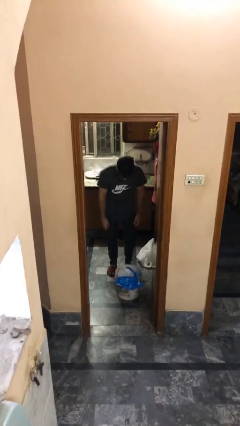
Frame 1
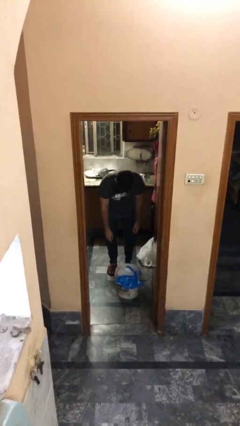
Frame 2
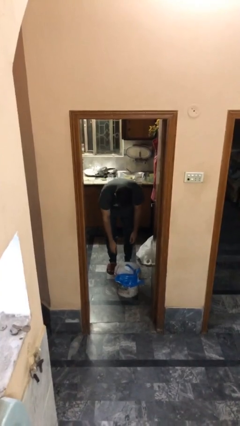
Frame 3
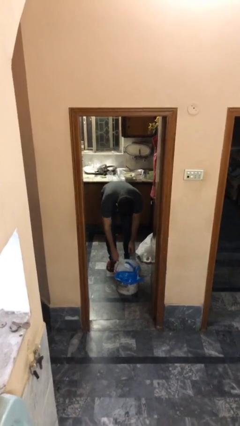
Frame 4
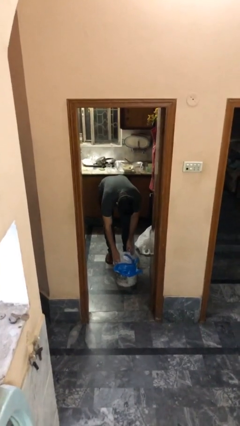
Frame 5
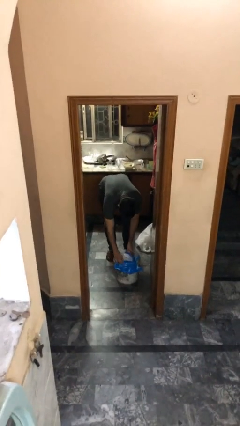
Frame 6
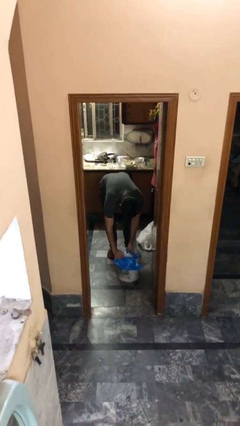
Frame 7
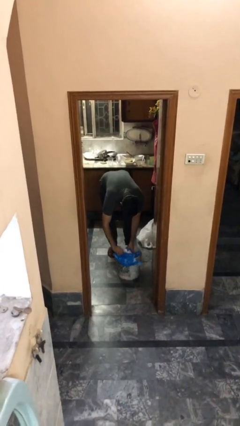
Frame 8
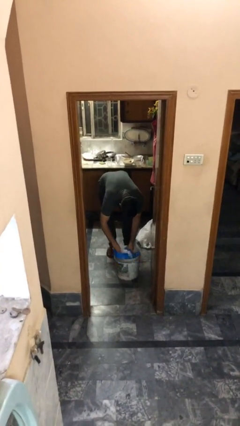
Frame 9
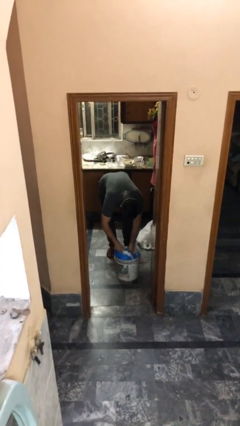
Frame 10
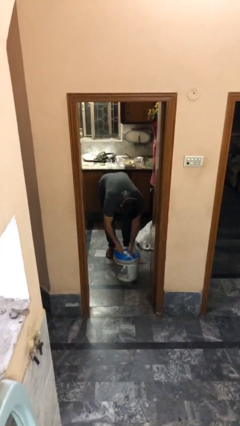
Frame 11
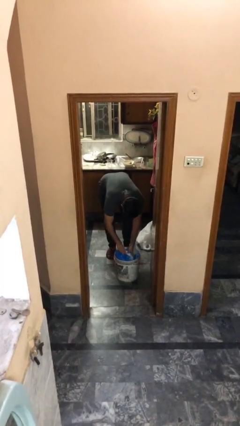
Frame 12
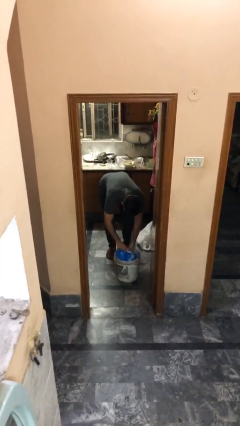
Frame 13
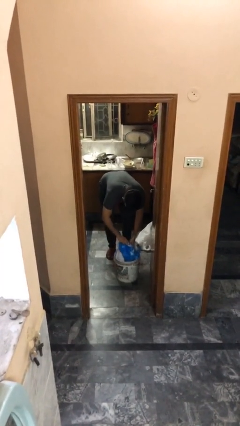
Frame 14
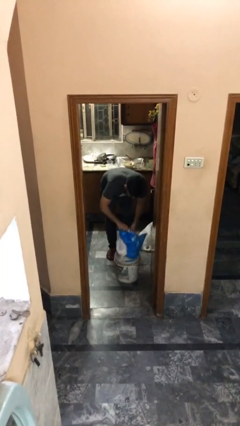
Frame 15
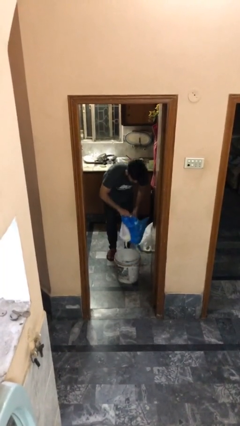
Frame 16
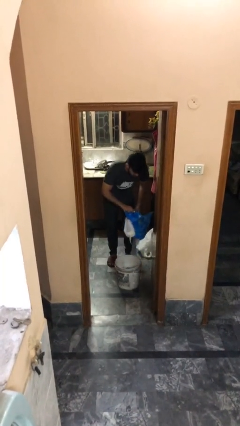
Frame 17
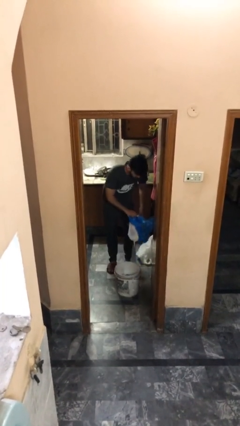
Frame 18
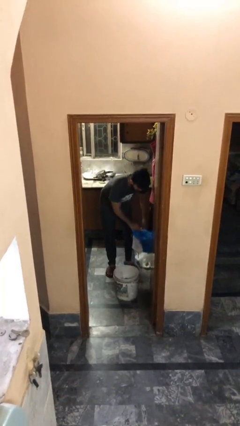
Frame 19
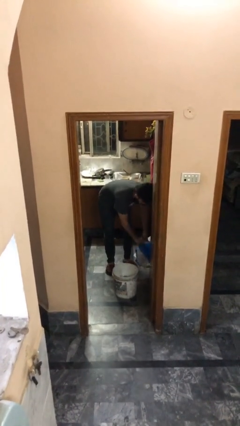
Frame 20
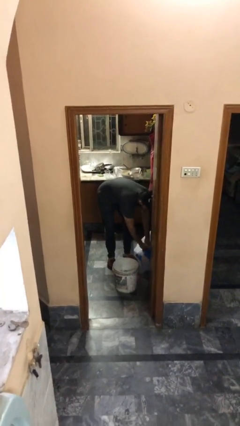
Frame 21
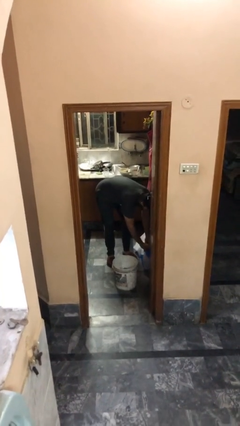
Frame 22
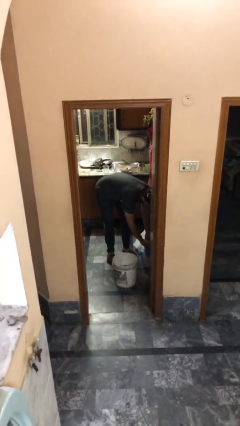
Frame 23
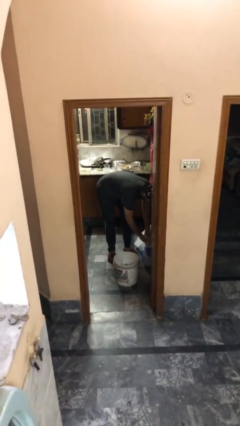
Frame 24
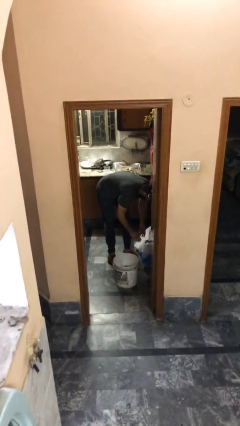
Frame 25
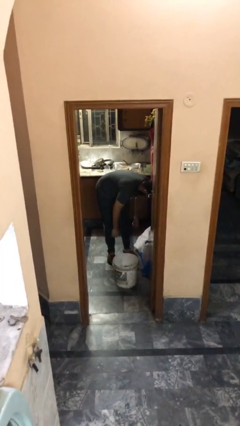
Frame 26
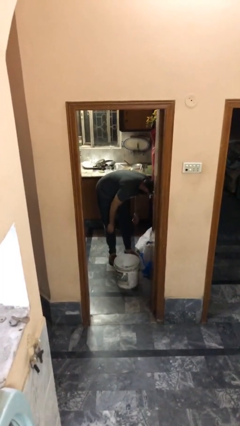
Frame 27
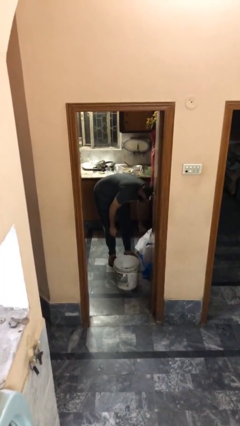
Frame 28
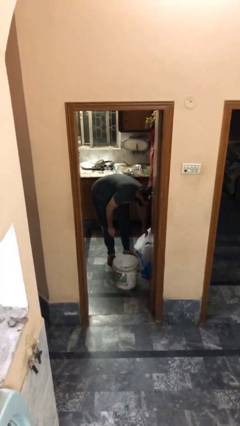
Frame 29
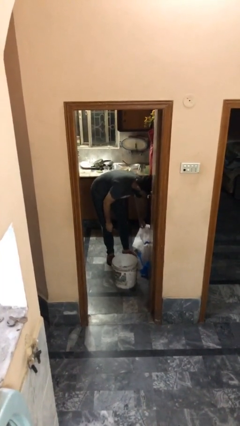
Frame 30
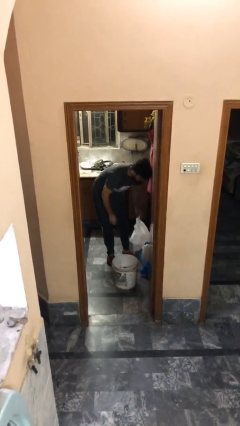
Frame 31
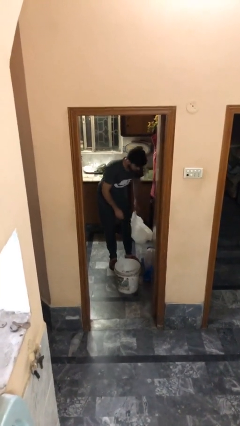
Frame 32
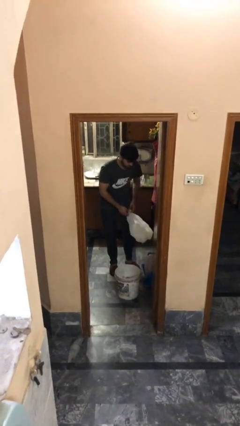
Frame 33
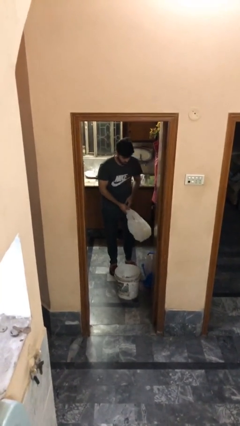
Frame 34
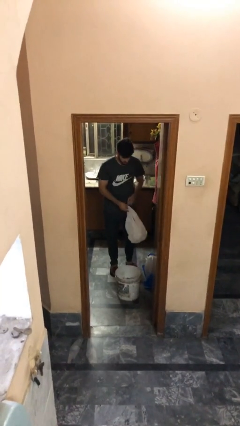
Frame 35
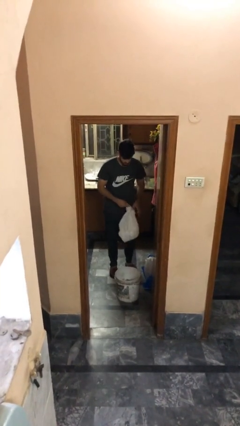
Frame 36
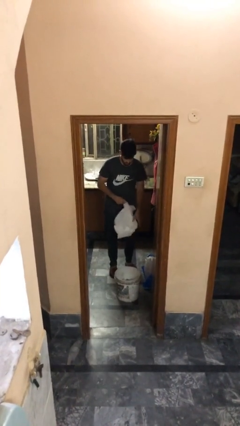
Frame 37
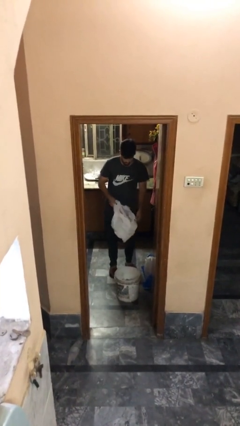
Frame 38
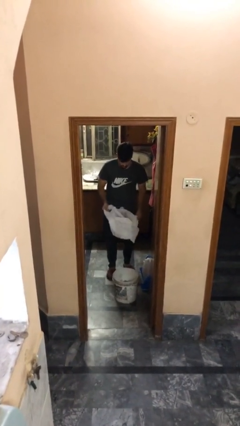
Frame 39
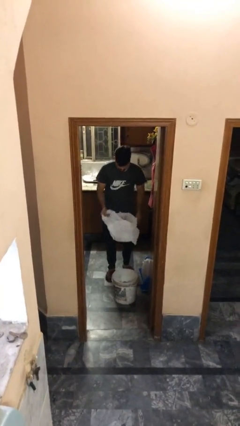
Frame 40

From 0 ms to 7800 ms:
person removes trashbag from trashcan

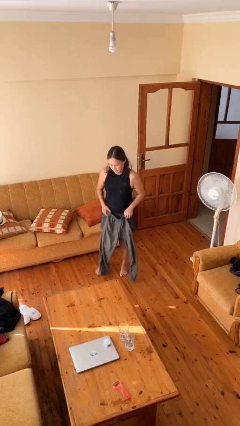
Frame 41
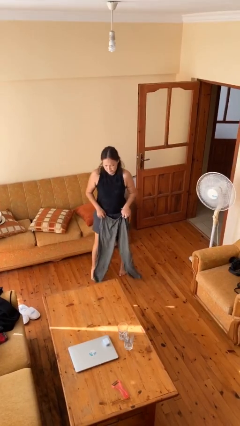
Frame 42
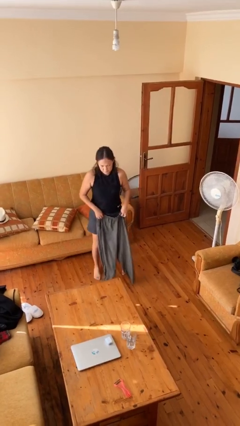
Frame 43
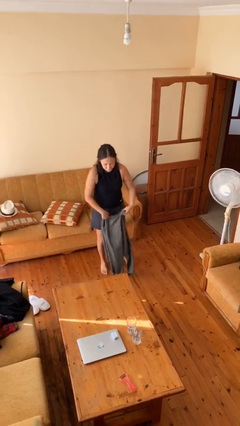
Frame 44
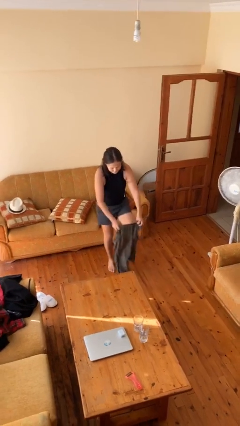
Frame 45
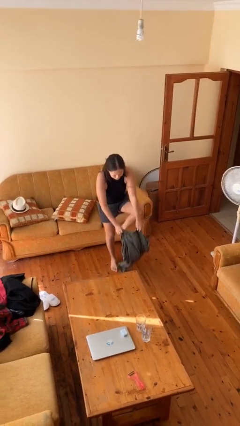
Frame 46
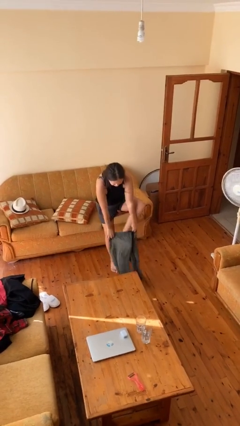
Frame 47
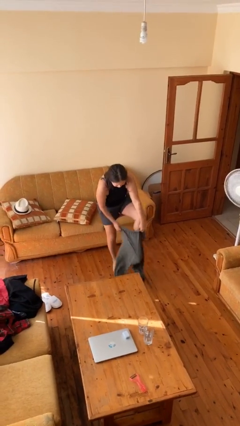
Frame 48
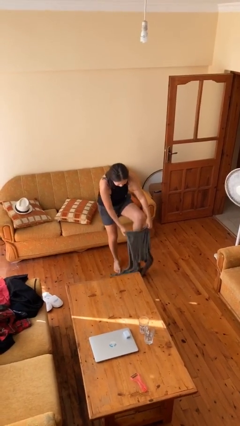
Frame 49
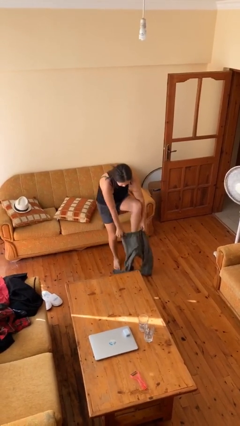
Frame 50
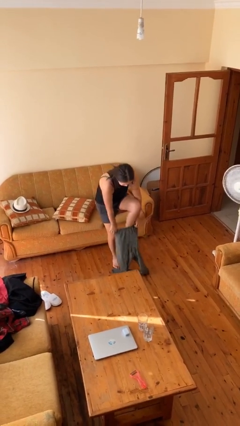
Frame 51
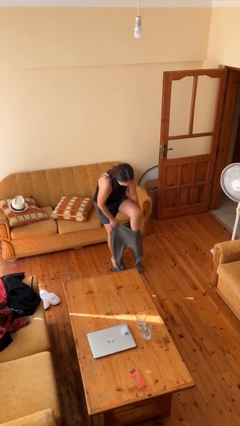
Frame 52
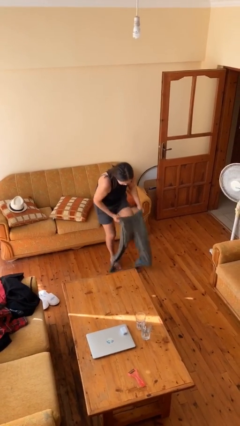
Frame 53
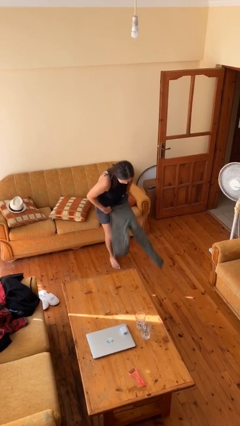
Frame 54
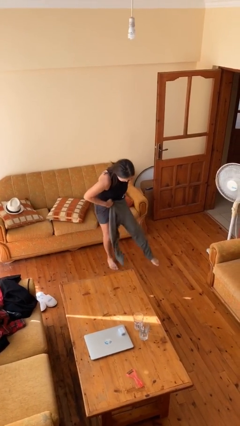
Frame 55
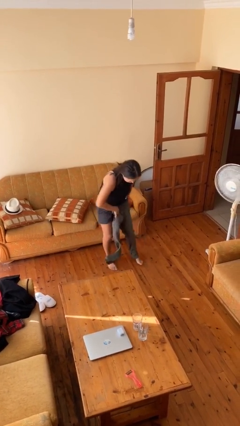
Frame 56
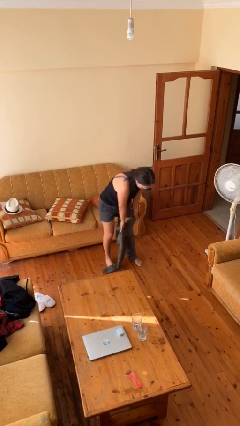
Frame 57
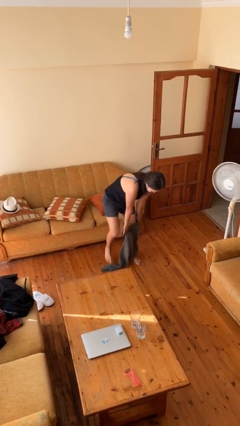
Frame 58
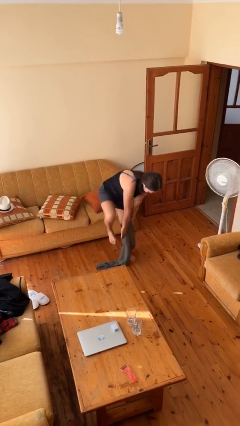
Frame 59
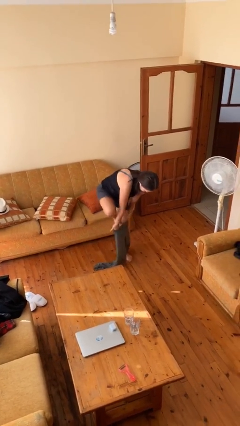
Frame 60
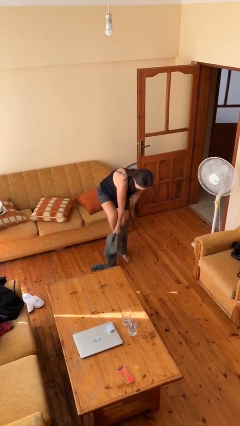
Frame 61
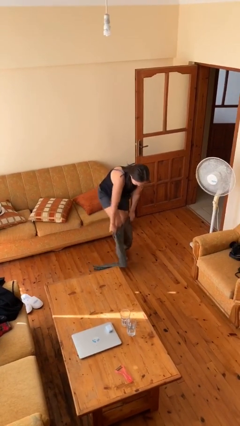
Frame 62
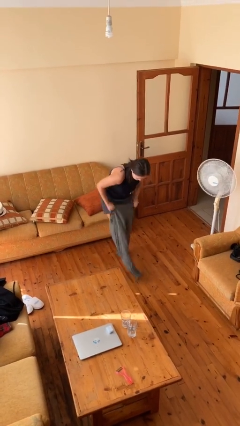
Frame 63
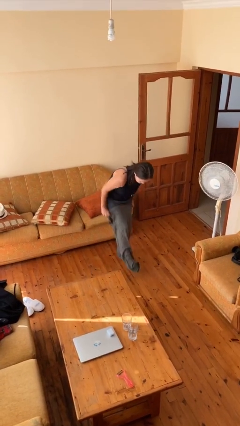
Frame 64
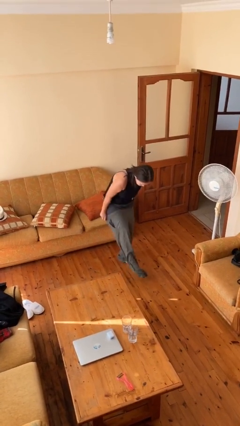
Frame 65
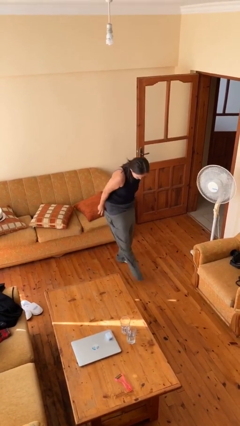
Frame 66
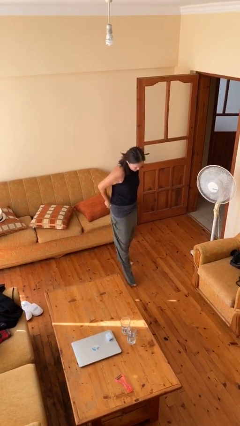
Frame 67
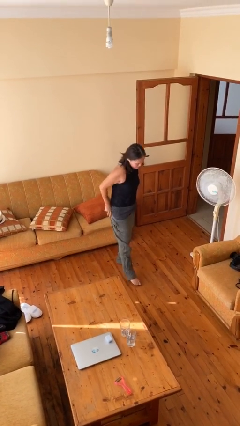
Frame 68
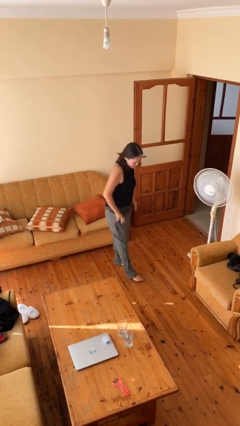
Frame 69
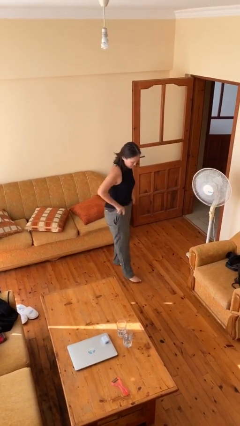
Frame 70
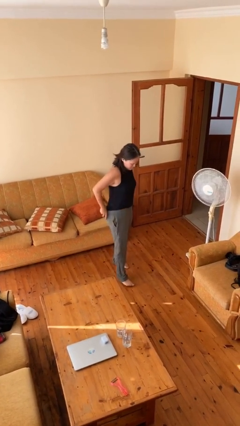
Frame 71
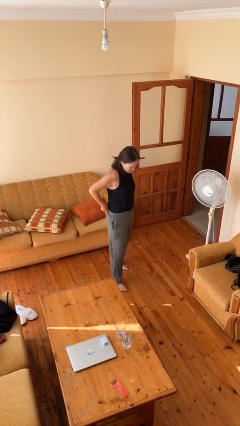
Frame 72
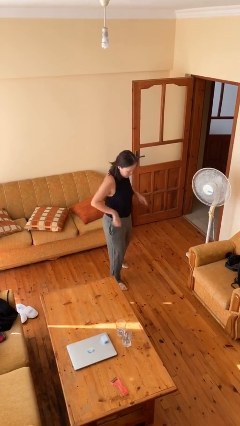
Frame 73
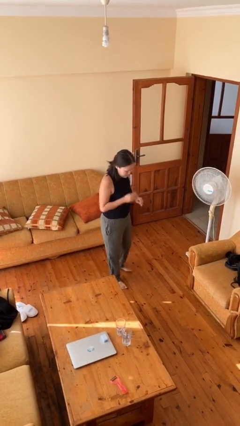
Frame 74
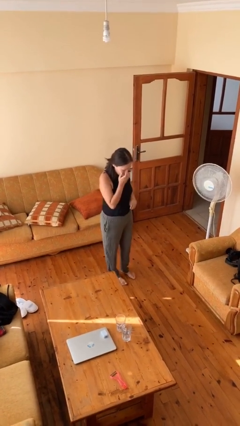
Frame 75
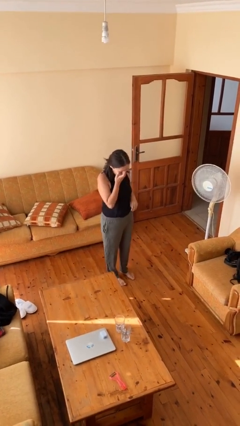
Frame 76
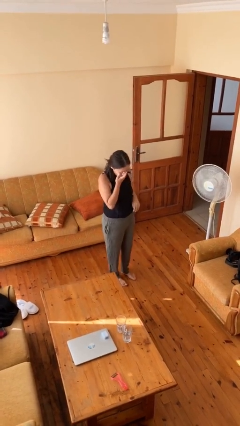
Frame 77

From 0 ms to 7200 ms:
person puts on pants

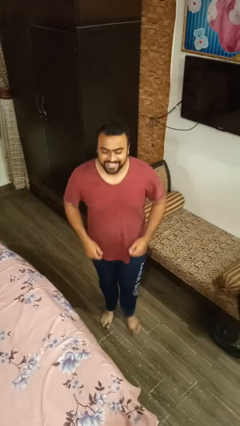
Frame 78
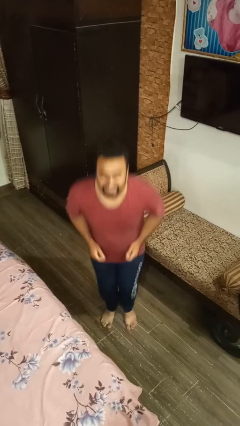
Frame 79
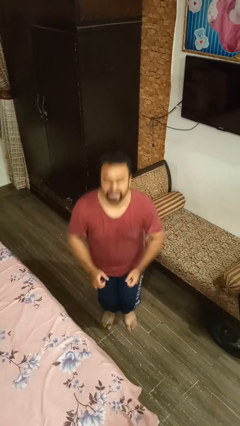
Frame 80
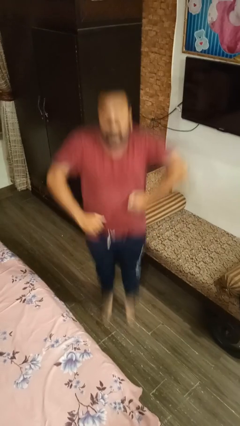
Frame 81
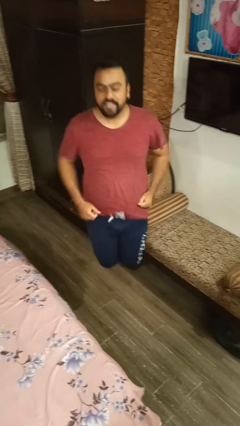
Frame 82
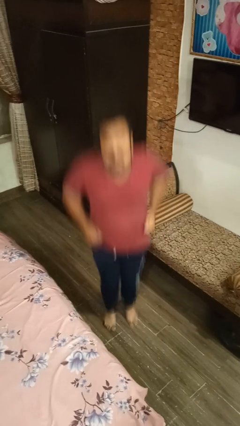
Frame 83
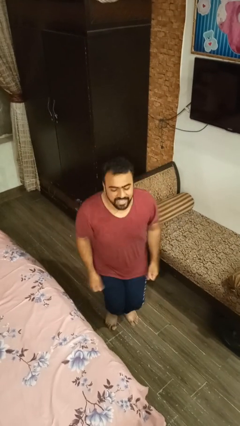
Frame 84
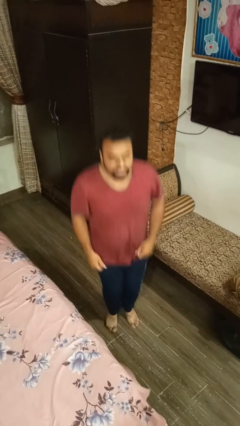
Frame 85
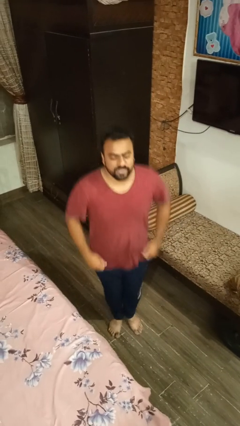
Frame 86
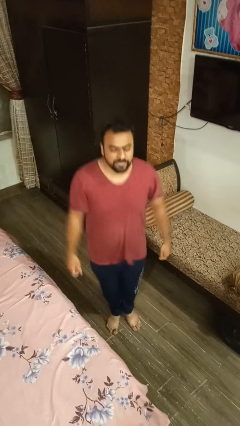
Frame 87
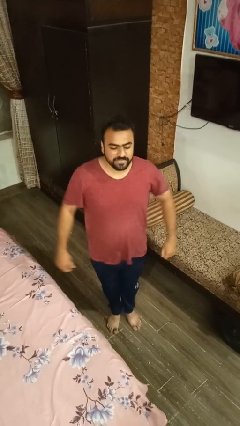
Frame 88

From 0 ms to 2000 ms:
person jumps

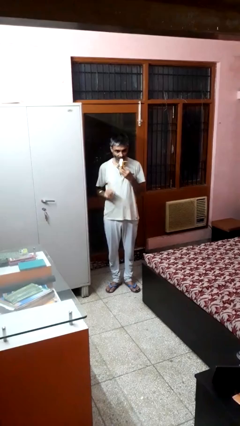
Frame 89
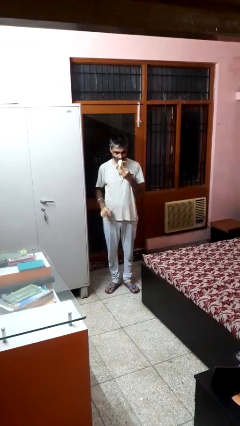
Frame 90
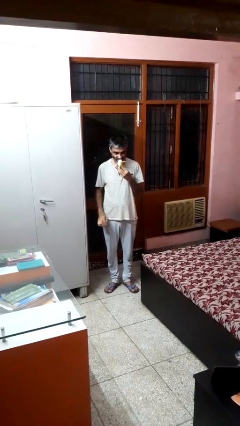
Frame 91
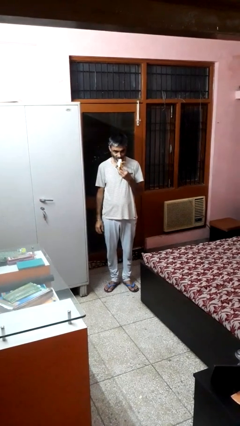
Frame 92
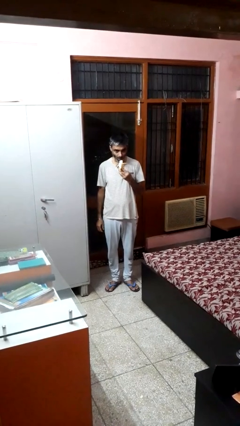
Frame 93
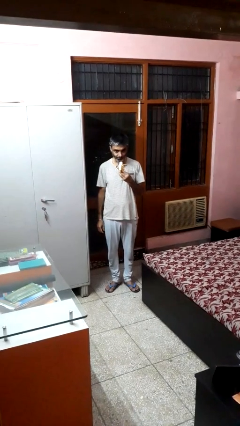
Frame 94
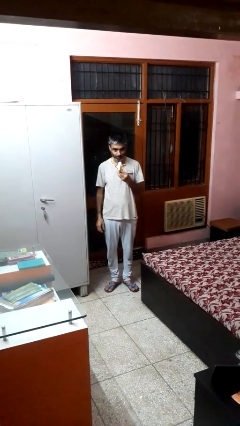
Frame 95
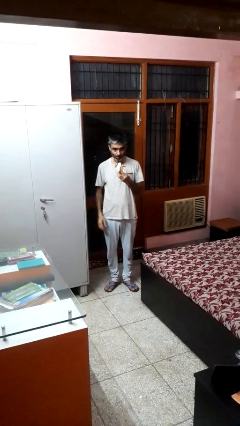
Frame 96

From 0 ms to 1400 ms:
person eats banana
